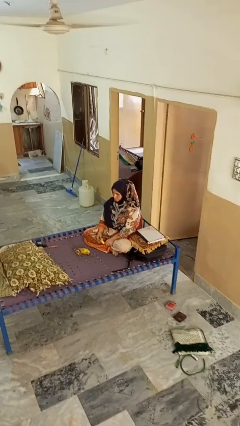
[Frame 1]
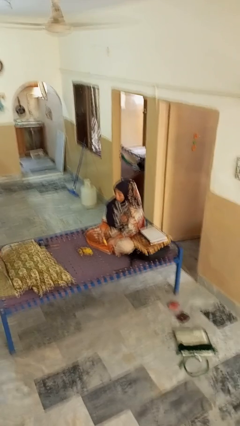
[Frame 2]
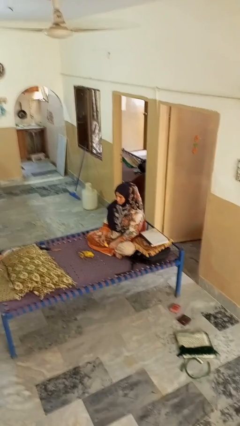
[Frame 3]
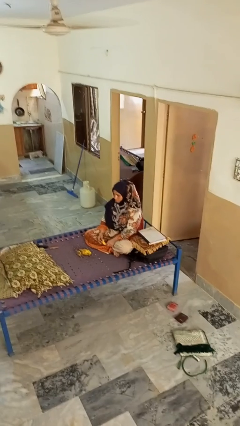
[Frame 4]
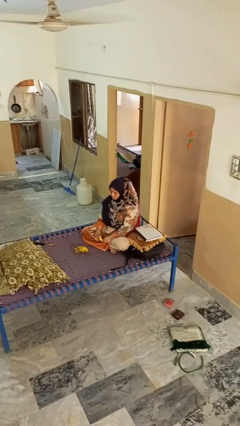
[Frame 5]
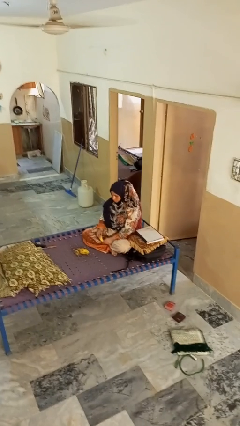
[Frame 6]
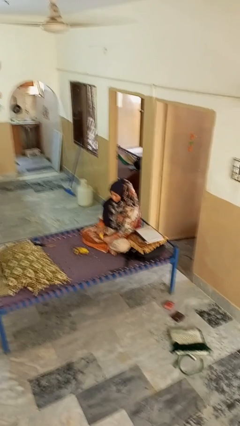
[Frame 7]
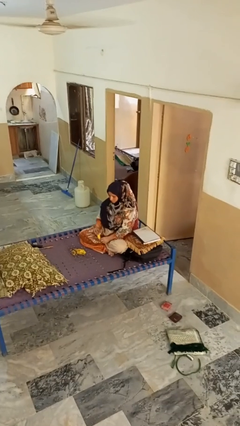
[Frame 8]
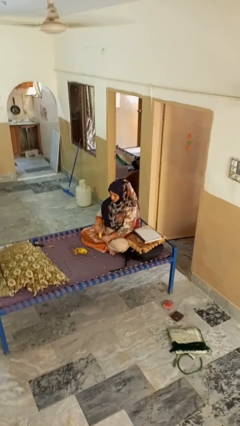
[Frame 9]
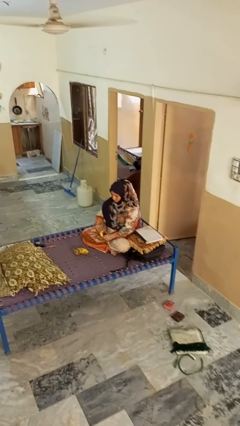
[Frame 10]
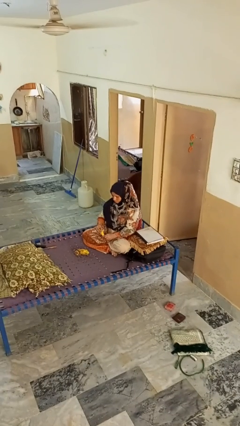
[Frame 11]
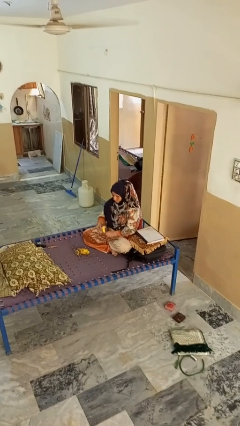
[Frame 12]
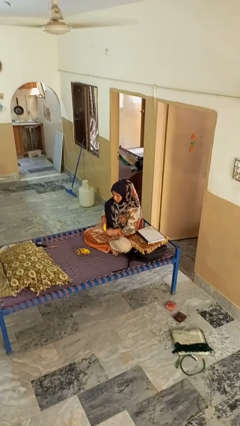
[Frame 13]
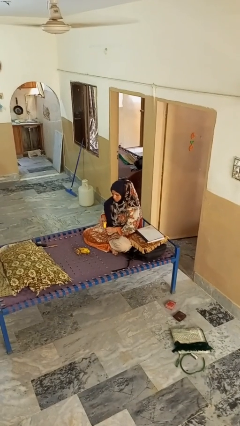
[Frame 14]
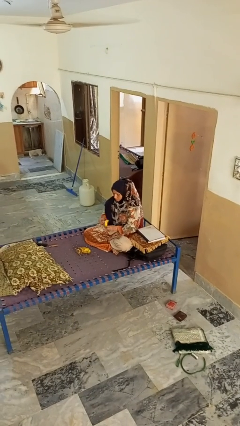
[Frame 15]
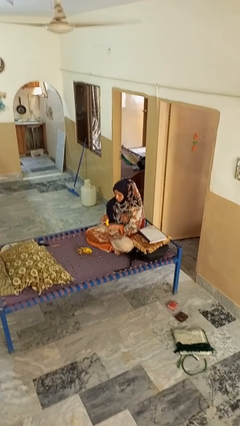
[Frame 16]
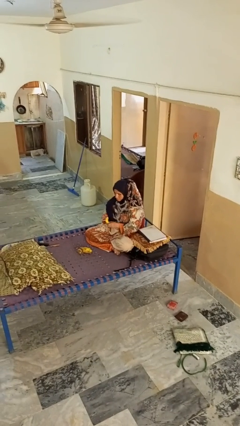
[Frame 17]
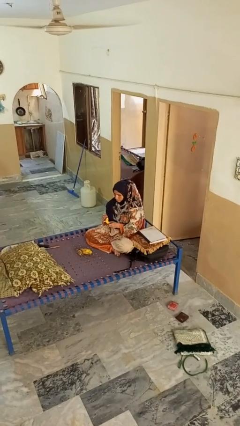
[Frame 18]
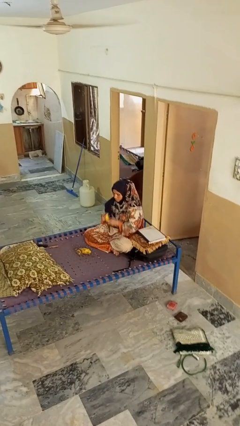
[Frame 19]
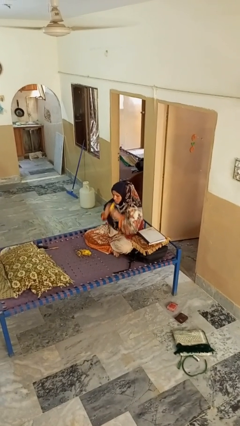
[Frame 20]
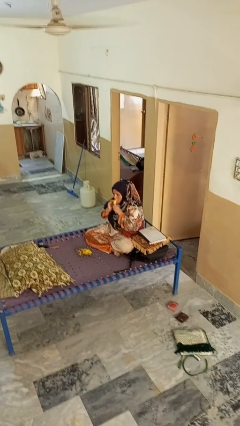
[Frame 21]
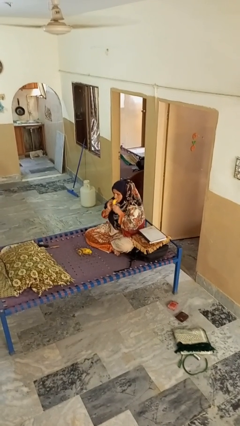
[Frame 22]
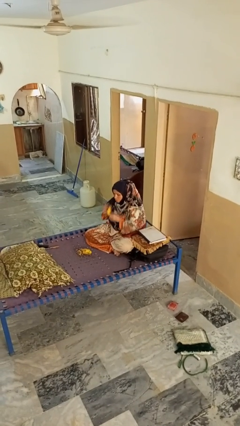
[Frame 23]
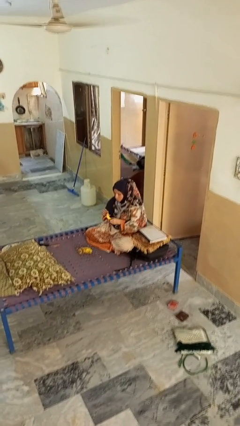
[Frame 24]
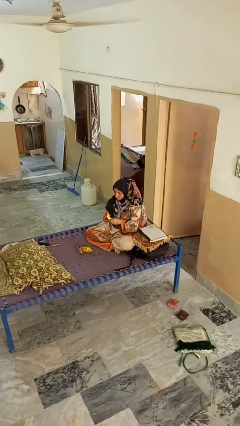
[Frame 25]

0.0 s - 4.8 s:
person eats banana

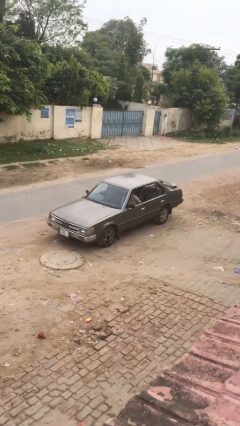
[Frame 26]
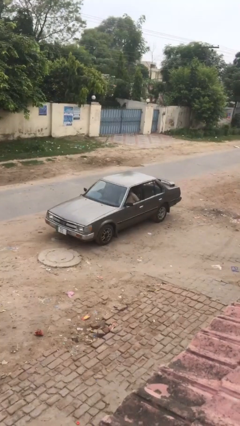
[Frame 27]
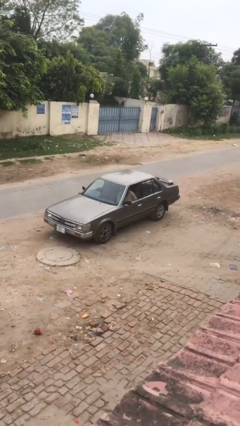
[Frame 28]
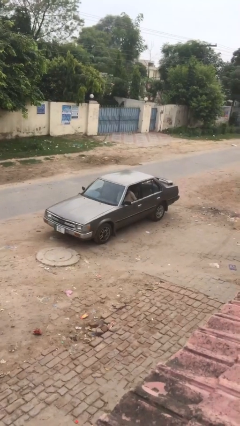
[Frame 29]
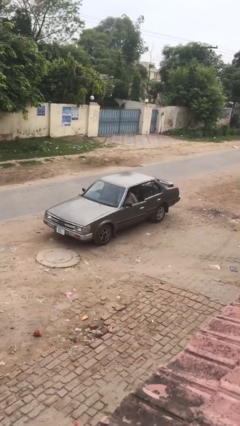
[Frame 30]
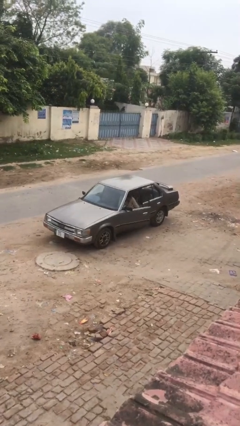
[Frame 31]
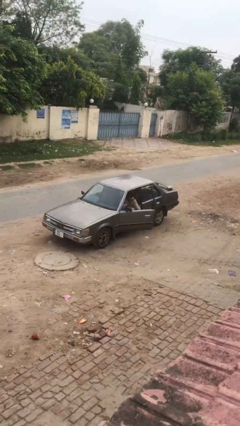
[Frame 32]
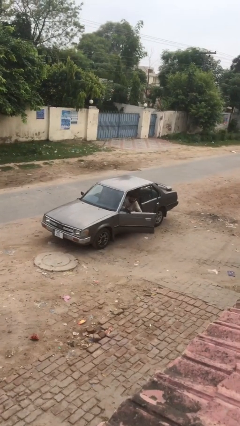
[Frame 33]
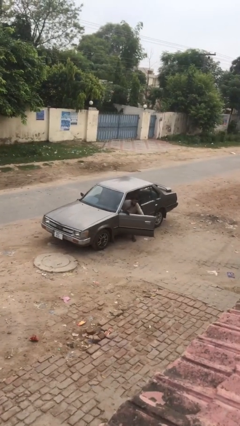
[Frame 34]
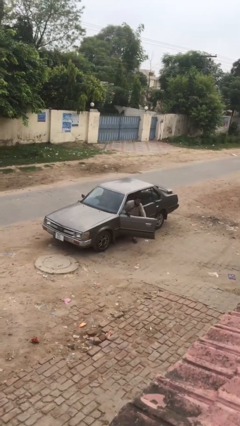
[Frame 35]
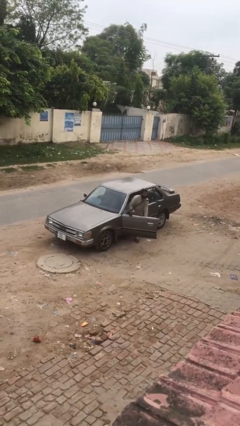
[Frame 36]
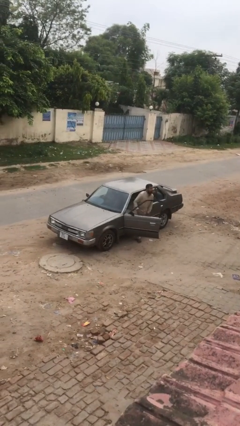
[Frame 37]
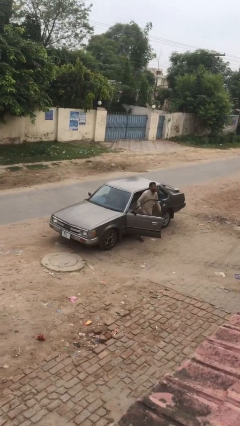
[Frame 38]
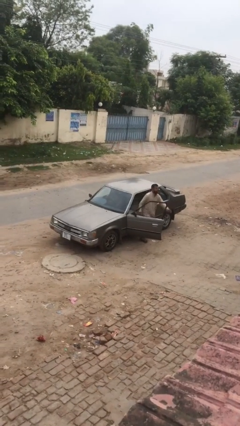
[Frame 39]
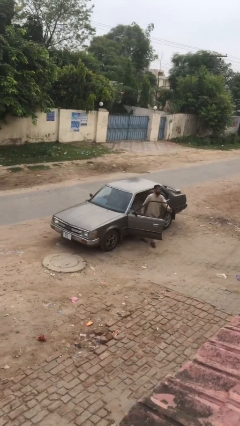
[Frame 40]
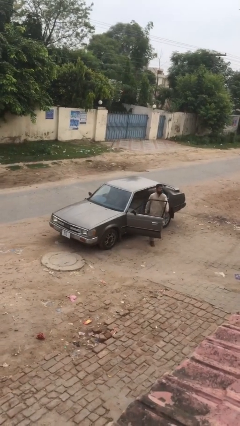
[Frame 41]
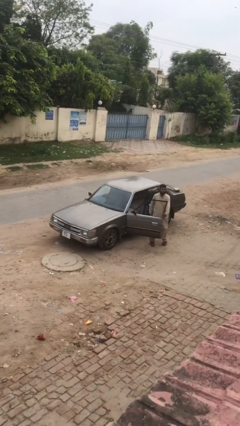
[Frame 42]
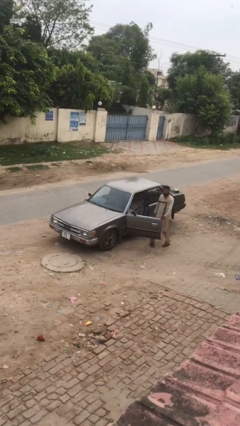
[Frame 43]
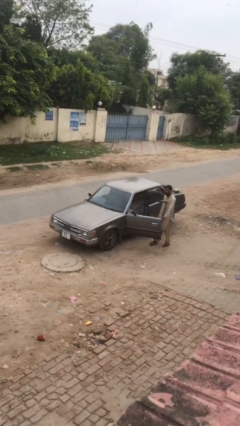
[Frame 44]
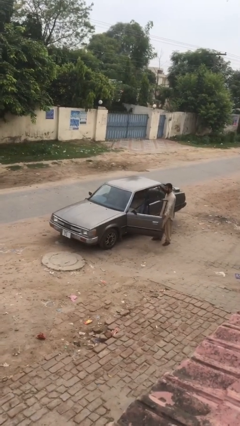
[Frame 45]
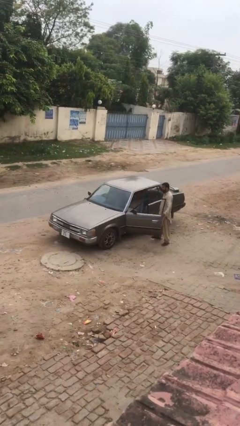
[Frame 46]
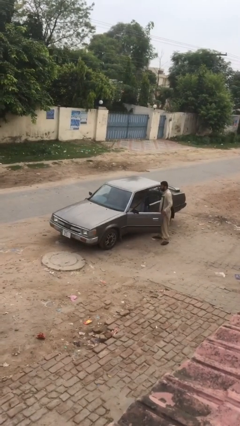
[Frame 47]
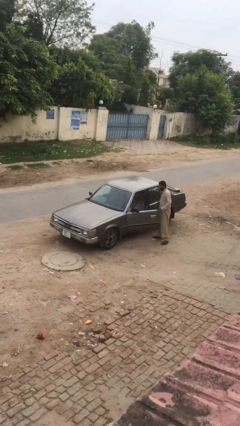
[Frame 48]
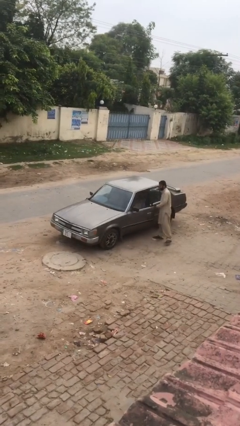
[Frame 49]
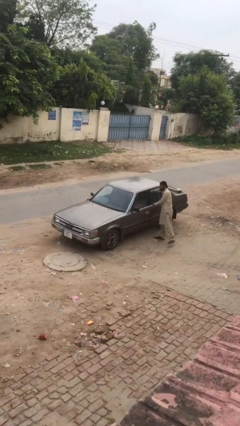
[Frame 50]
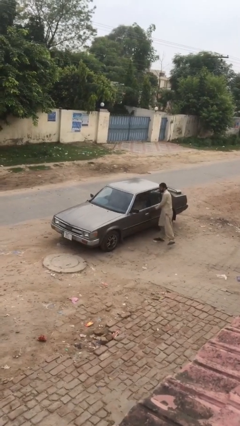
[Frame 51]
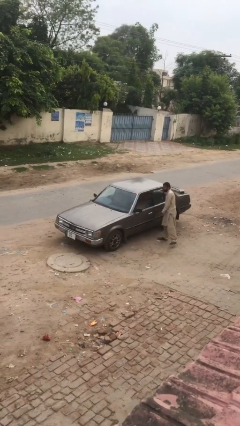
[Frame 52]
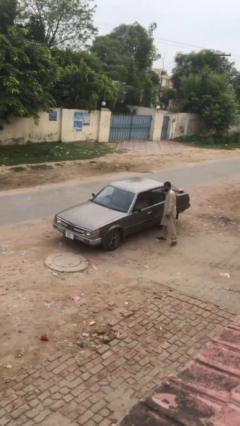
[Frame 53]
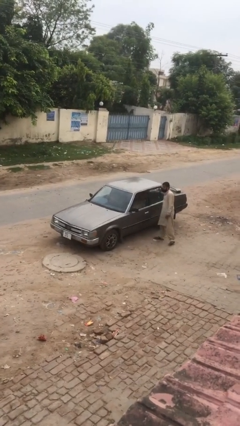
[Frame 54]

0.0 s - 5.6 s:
car drops off person

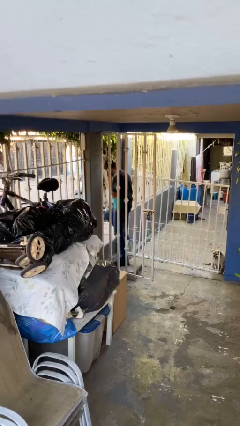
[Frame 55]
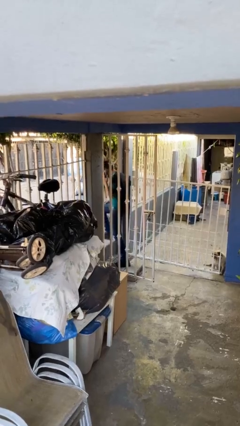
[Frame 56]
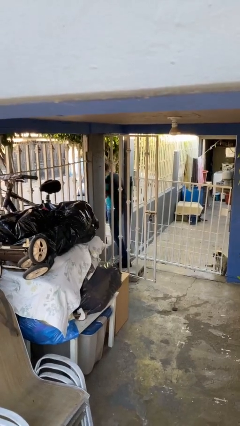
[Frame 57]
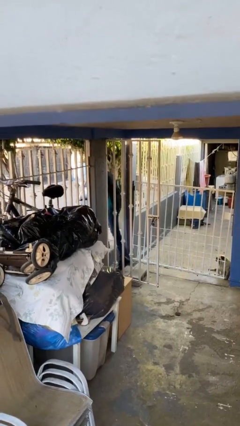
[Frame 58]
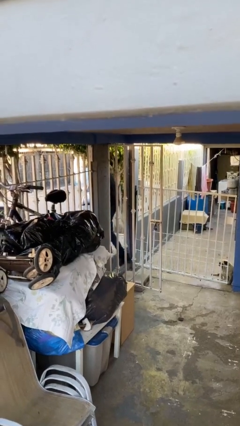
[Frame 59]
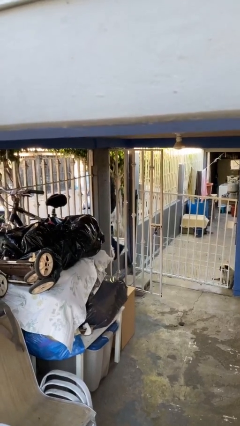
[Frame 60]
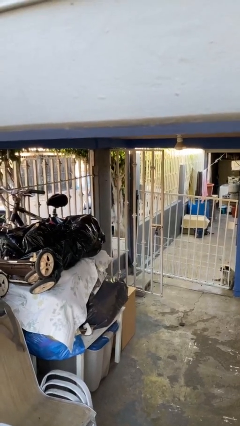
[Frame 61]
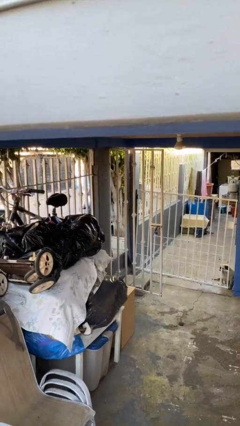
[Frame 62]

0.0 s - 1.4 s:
person exits scene through structure

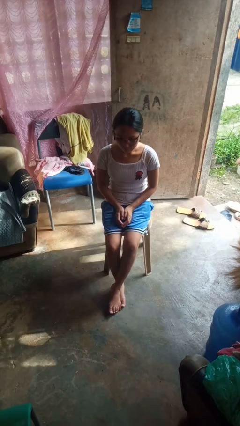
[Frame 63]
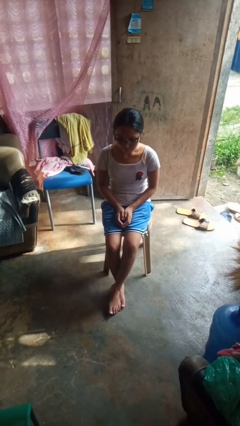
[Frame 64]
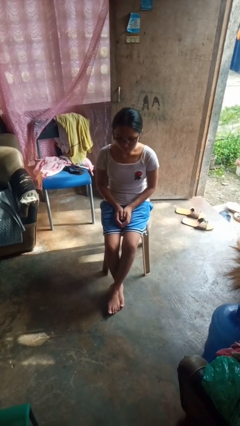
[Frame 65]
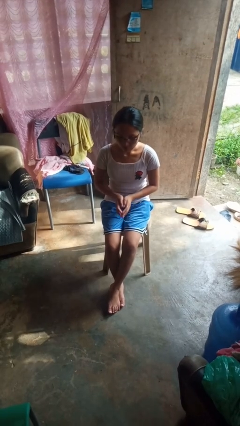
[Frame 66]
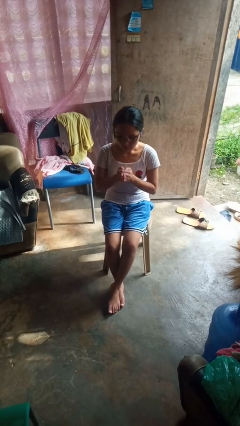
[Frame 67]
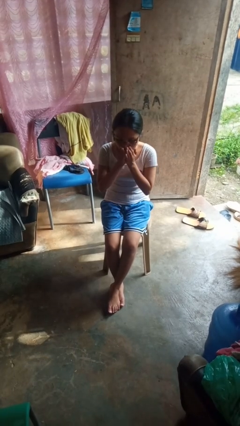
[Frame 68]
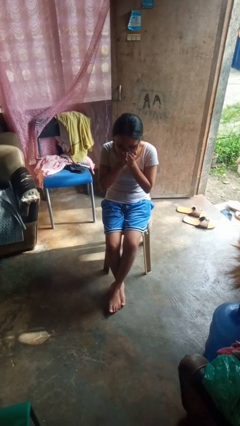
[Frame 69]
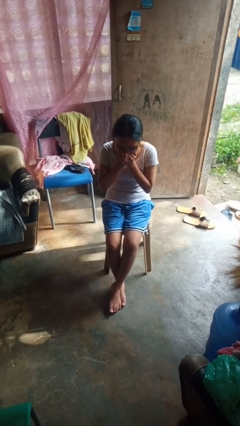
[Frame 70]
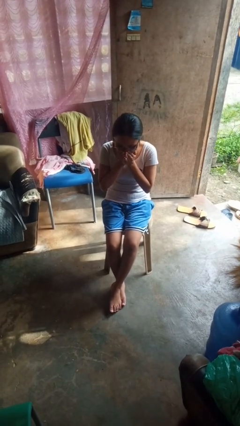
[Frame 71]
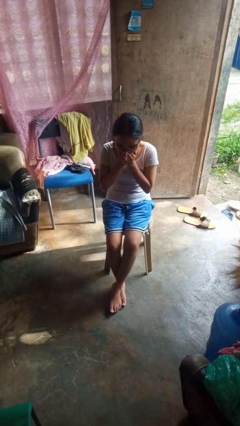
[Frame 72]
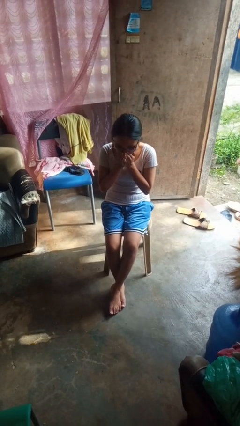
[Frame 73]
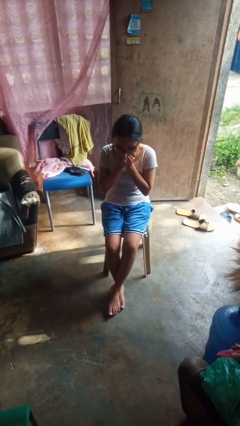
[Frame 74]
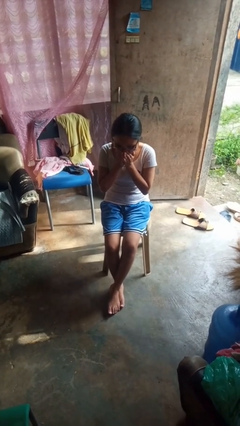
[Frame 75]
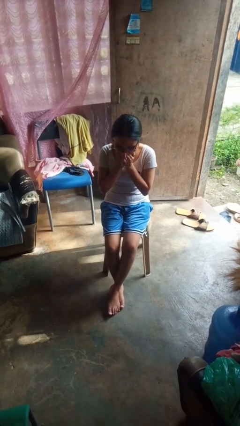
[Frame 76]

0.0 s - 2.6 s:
person sneezes into hand

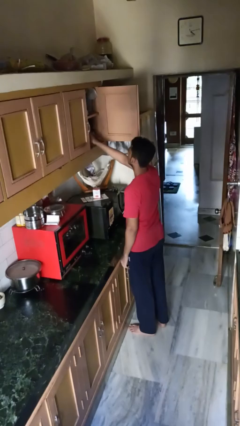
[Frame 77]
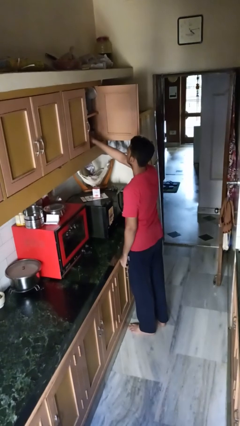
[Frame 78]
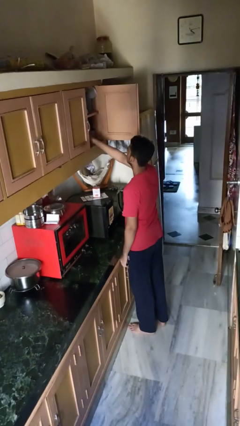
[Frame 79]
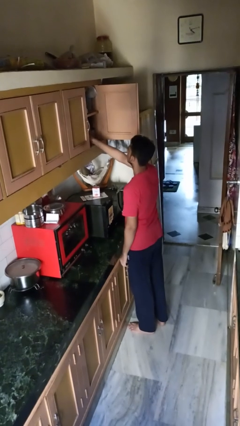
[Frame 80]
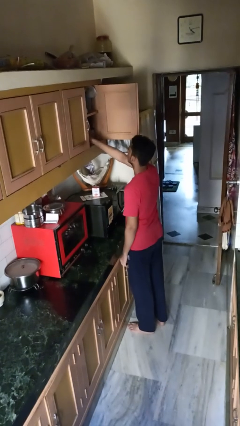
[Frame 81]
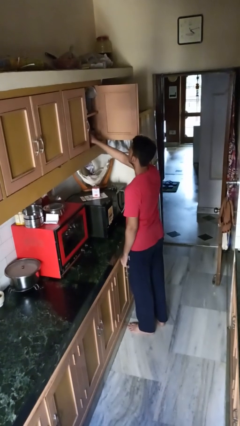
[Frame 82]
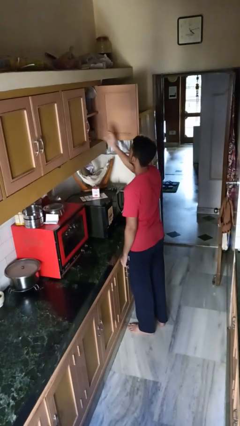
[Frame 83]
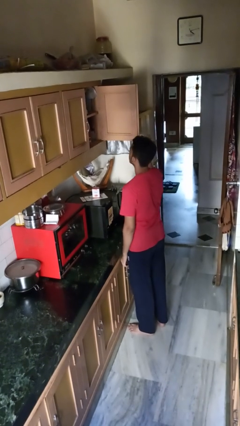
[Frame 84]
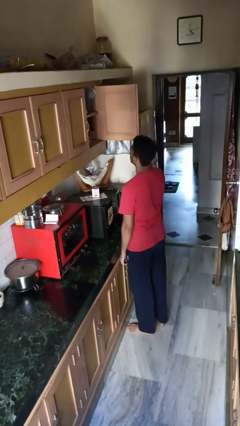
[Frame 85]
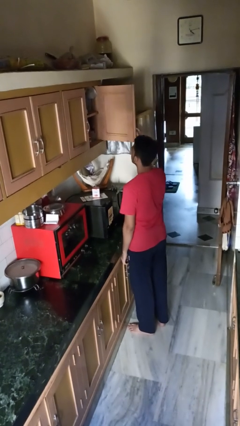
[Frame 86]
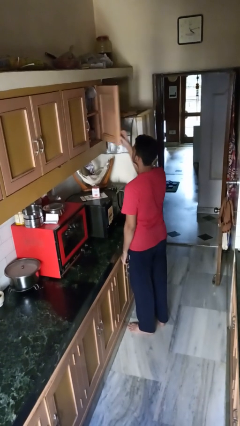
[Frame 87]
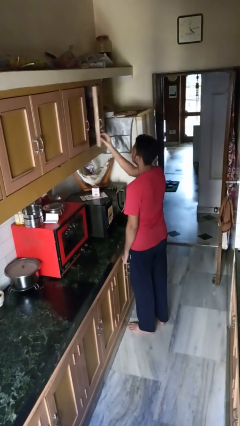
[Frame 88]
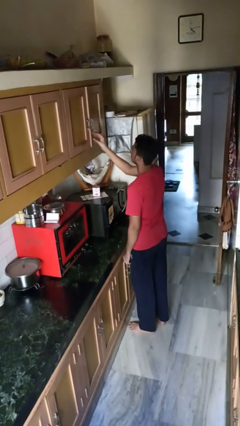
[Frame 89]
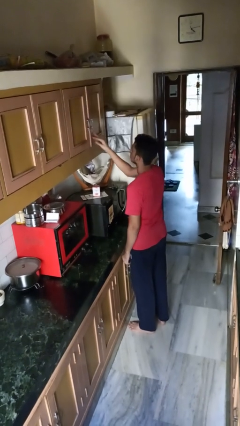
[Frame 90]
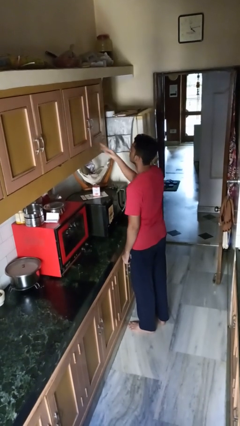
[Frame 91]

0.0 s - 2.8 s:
person puts object in cabinet

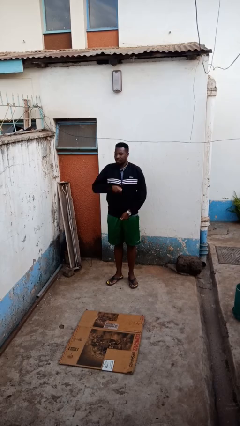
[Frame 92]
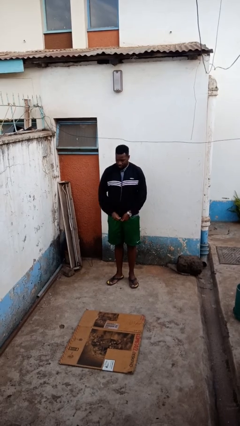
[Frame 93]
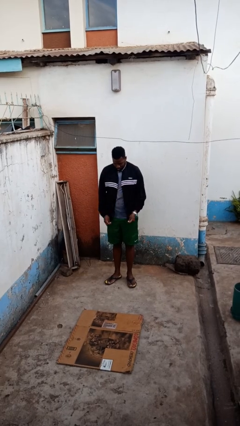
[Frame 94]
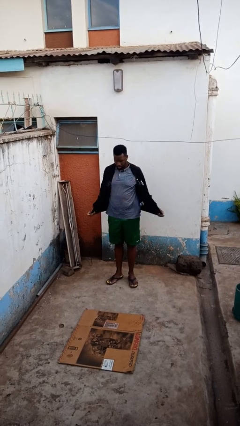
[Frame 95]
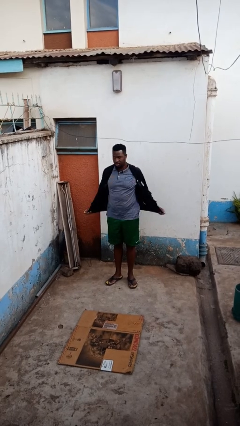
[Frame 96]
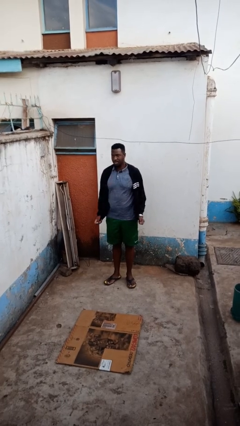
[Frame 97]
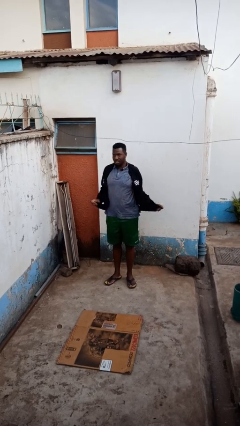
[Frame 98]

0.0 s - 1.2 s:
person unzips jacket
